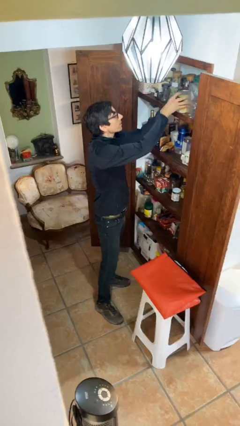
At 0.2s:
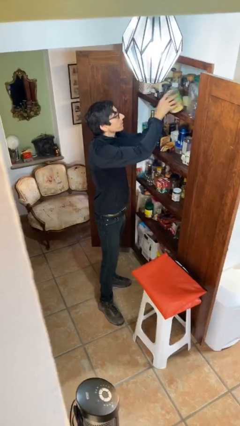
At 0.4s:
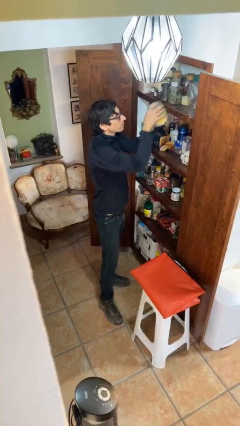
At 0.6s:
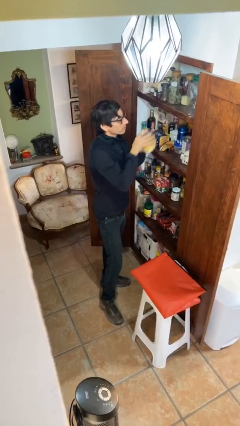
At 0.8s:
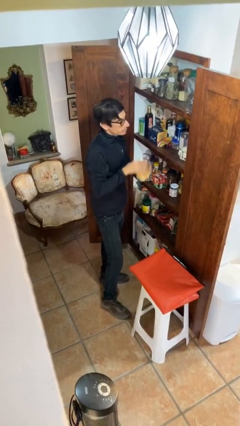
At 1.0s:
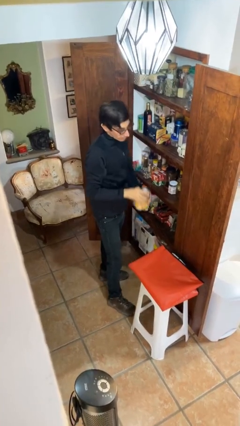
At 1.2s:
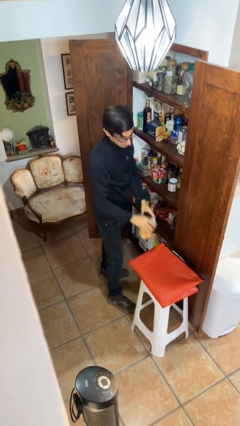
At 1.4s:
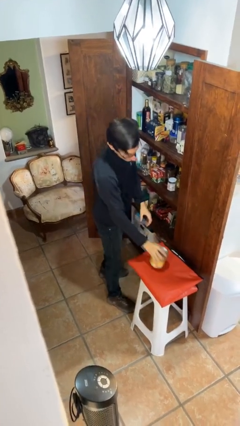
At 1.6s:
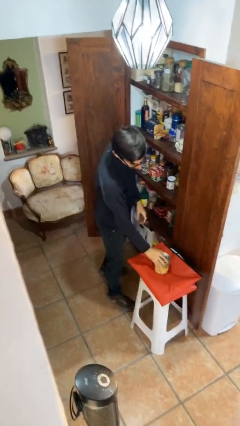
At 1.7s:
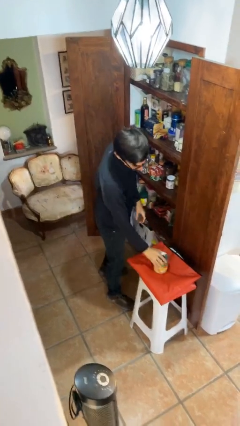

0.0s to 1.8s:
person picks up object from shelf

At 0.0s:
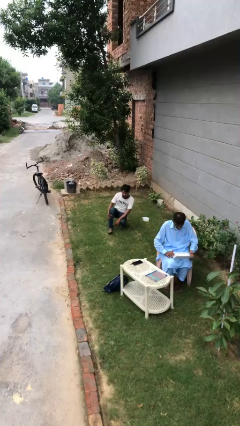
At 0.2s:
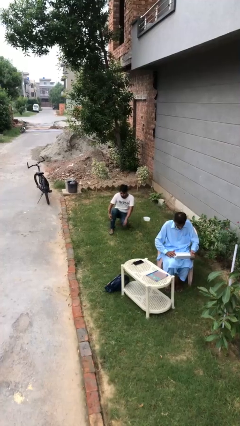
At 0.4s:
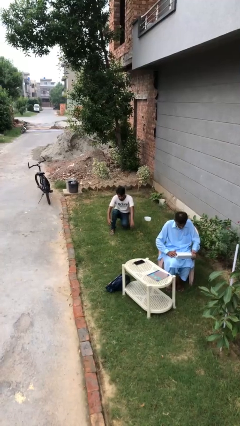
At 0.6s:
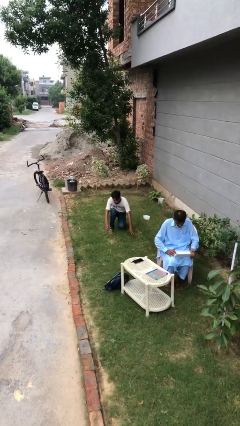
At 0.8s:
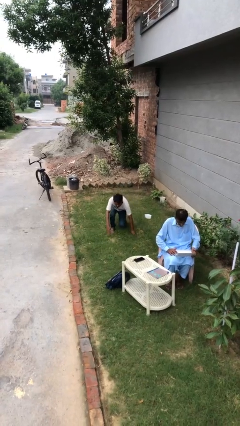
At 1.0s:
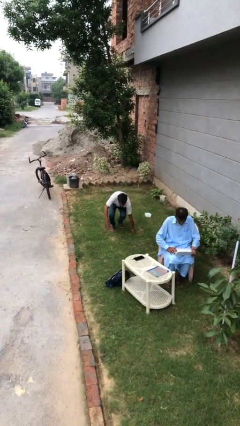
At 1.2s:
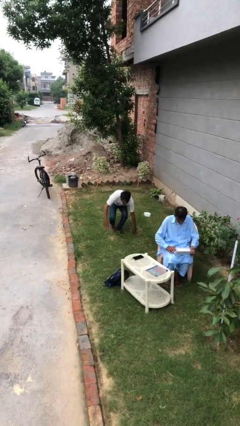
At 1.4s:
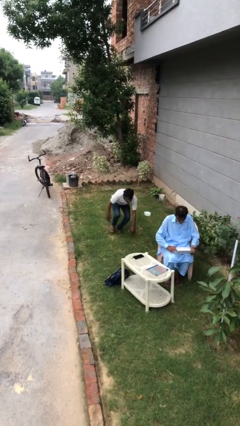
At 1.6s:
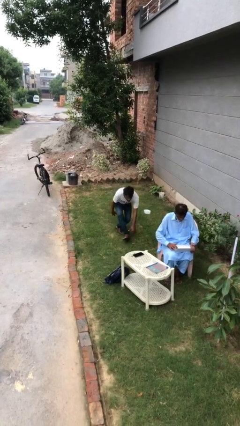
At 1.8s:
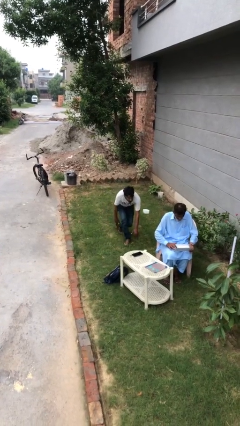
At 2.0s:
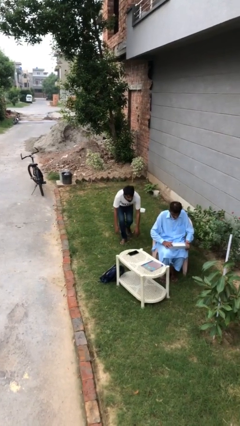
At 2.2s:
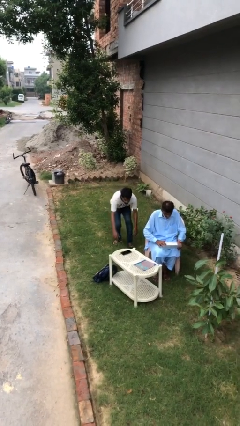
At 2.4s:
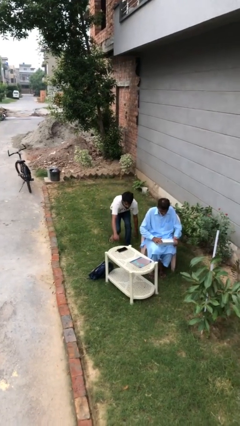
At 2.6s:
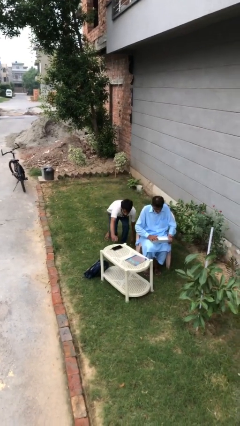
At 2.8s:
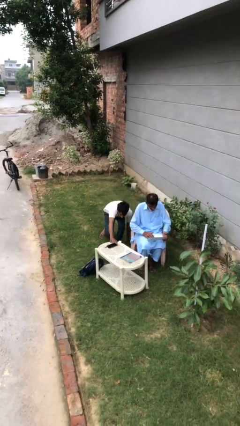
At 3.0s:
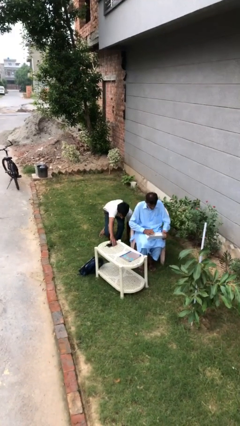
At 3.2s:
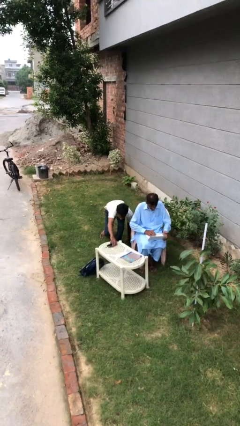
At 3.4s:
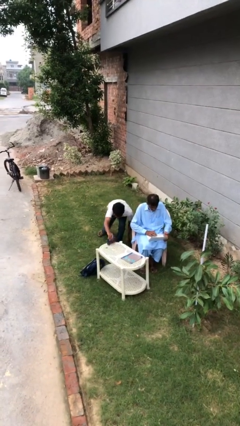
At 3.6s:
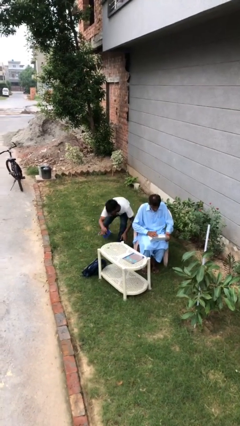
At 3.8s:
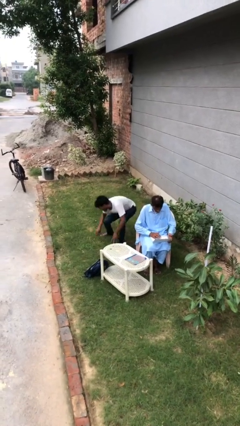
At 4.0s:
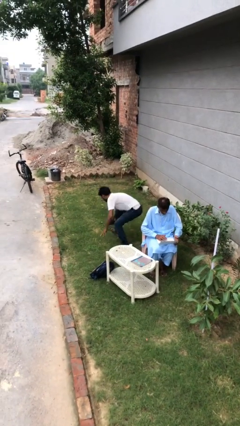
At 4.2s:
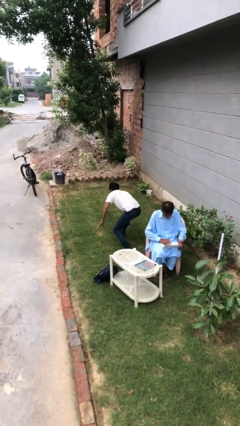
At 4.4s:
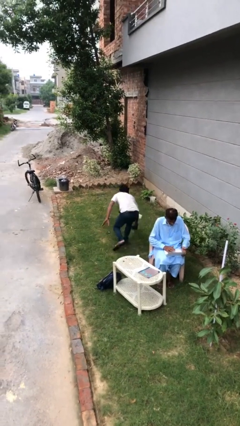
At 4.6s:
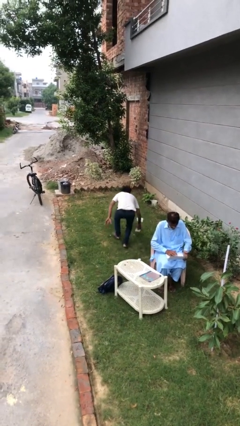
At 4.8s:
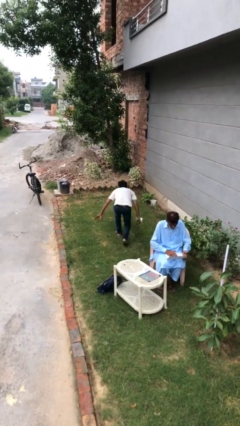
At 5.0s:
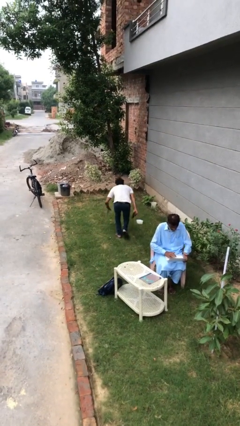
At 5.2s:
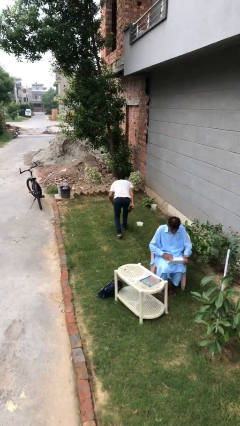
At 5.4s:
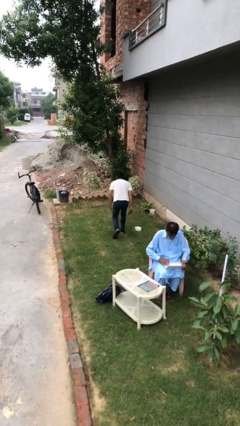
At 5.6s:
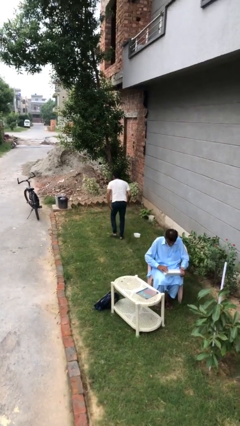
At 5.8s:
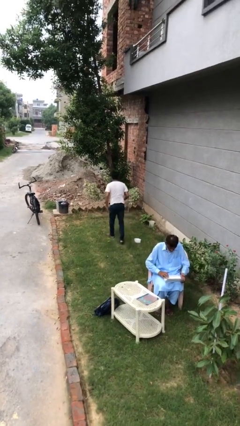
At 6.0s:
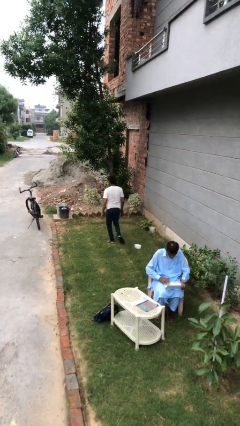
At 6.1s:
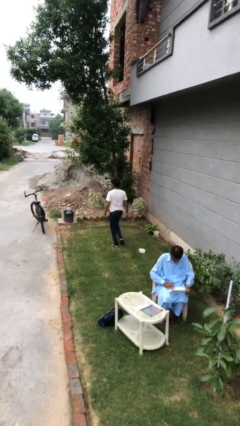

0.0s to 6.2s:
person steals object from person

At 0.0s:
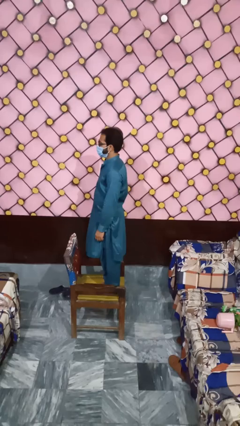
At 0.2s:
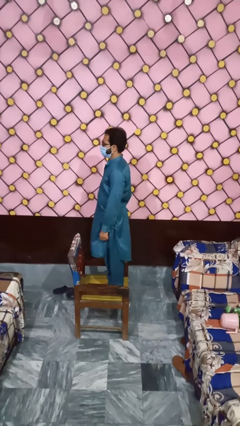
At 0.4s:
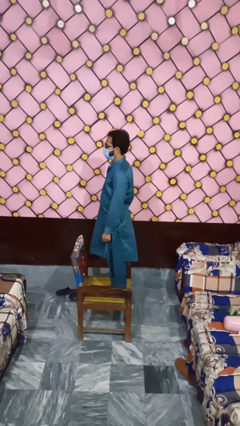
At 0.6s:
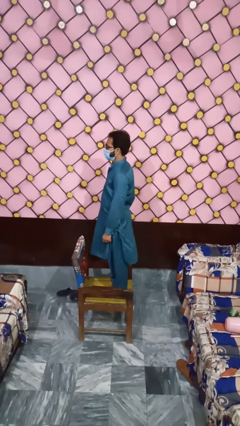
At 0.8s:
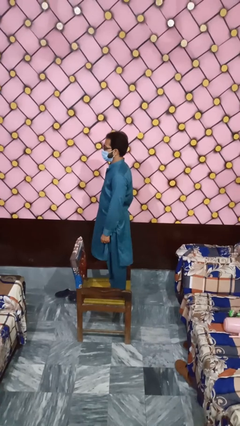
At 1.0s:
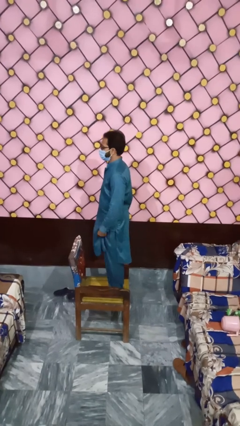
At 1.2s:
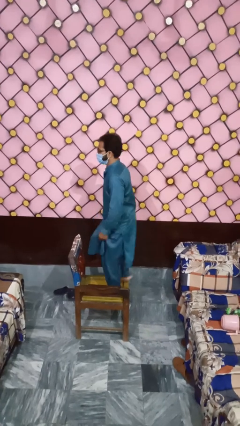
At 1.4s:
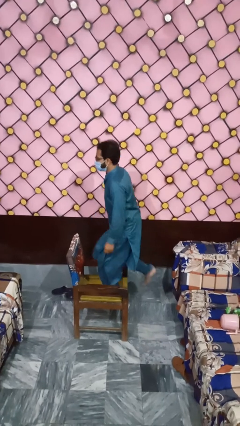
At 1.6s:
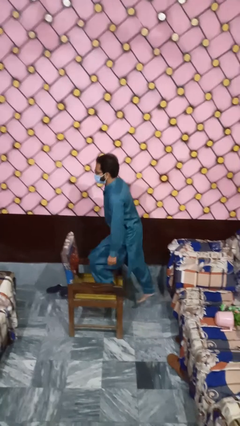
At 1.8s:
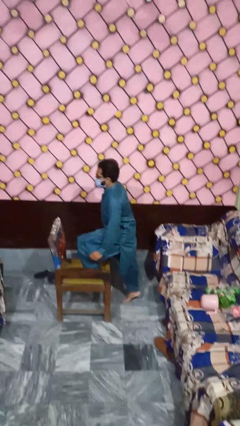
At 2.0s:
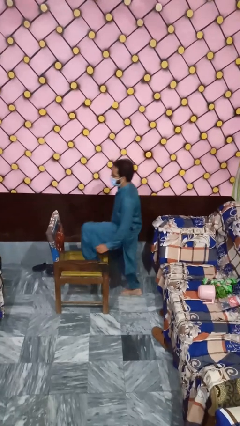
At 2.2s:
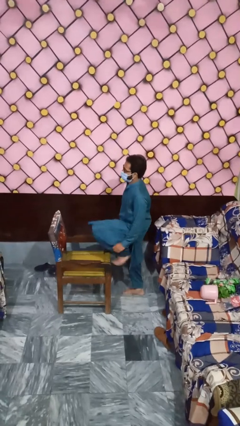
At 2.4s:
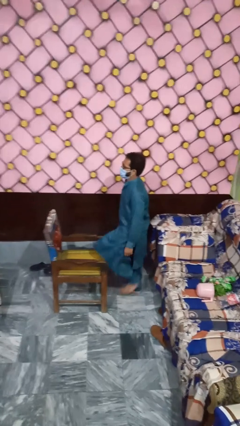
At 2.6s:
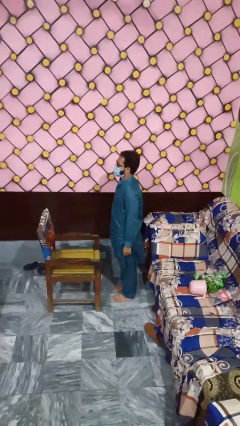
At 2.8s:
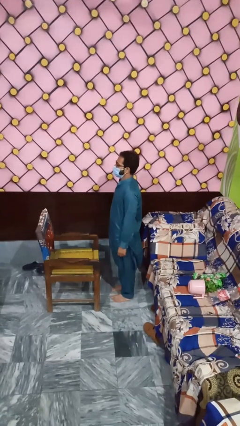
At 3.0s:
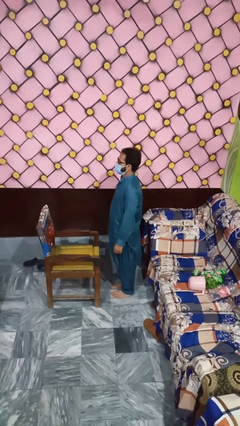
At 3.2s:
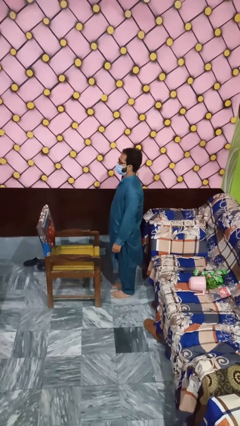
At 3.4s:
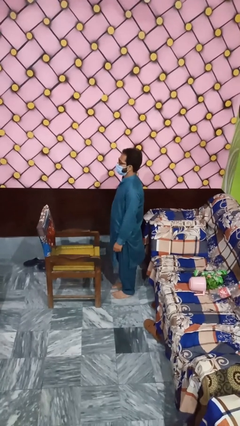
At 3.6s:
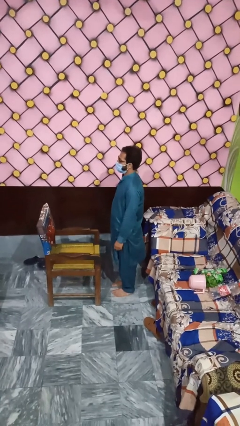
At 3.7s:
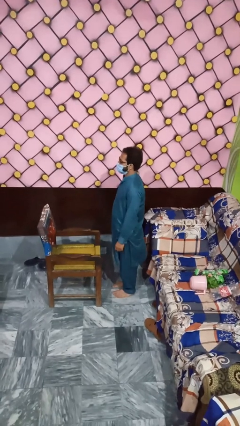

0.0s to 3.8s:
person climbs off chair

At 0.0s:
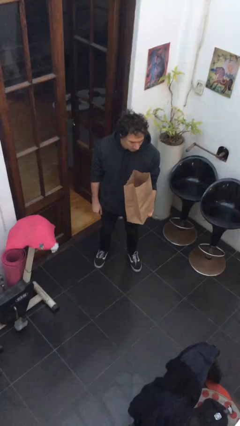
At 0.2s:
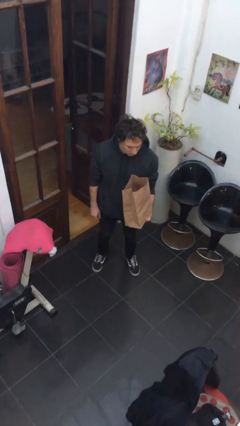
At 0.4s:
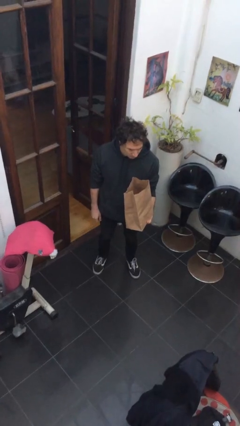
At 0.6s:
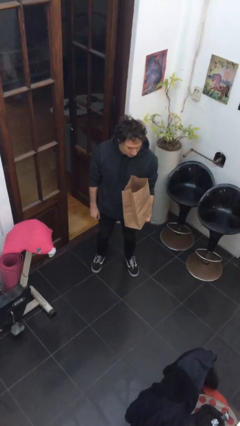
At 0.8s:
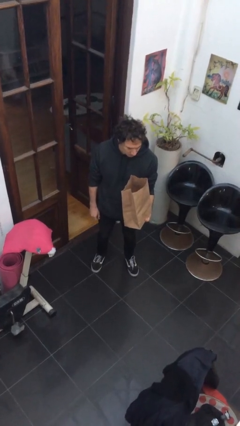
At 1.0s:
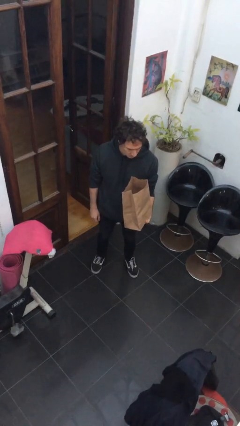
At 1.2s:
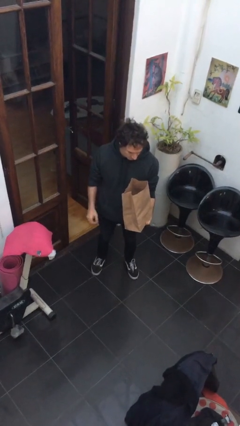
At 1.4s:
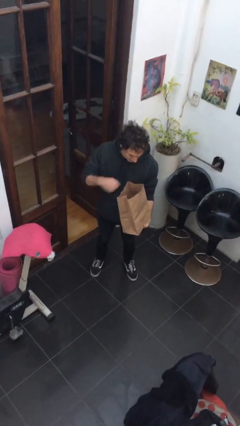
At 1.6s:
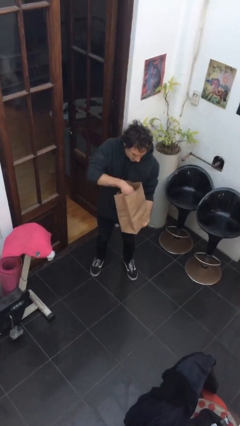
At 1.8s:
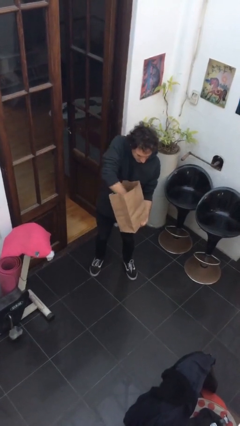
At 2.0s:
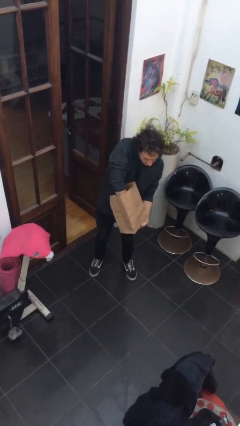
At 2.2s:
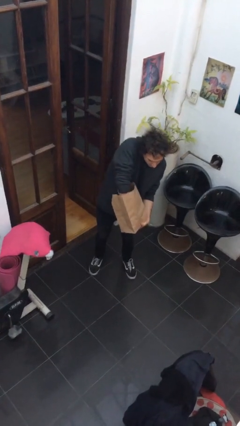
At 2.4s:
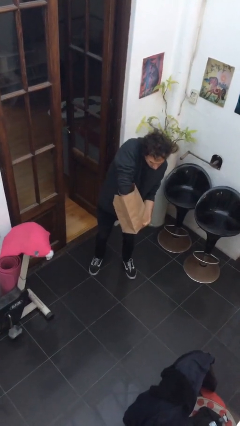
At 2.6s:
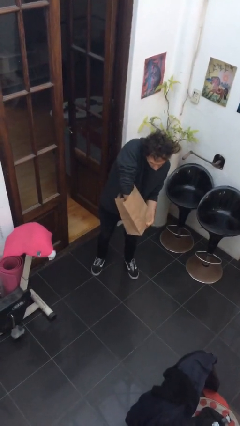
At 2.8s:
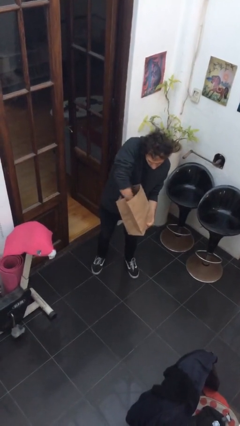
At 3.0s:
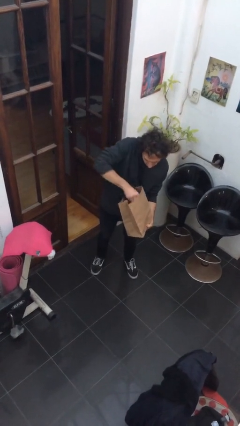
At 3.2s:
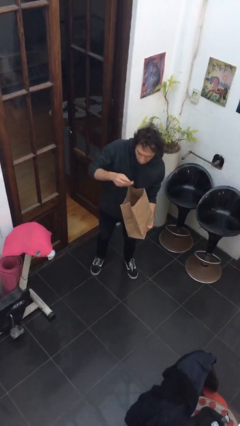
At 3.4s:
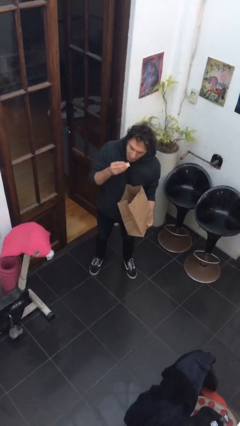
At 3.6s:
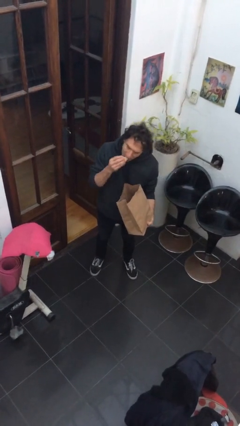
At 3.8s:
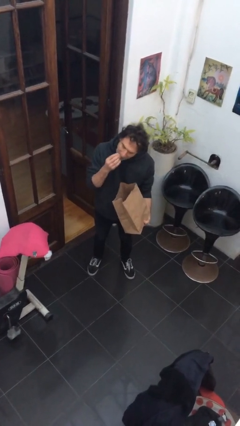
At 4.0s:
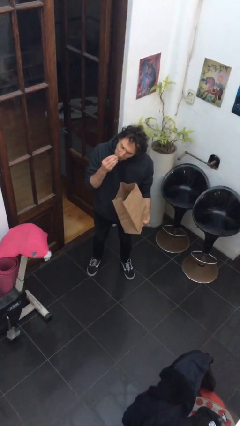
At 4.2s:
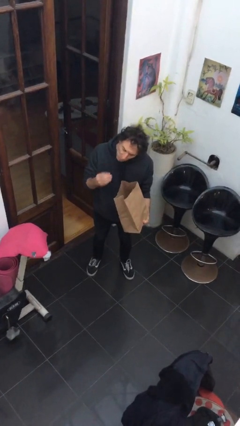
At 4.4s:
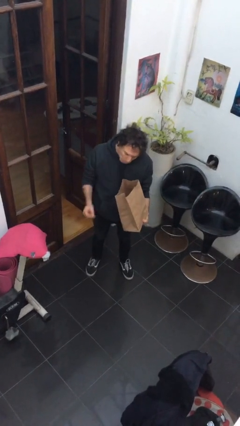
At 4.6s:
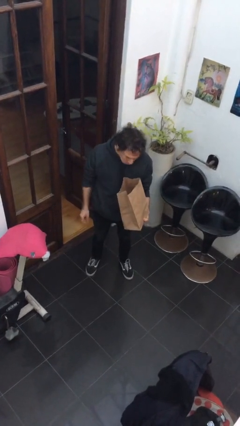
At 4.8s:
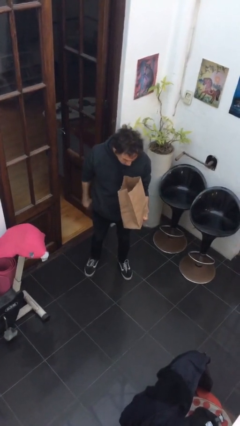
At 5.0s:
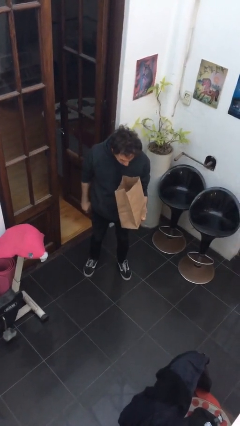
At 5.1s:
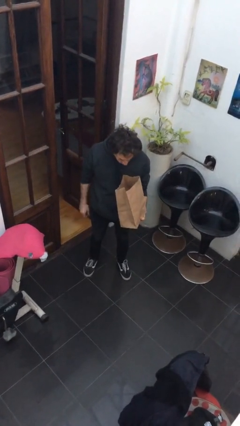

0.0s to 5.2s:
person eats snack from bag

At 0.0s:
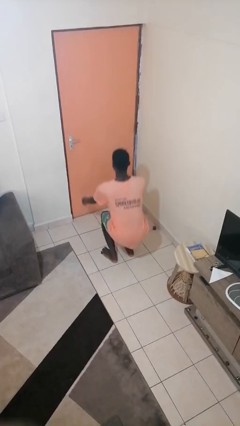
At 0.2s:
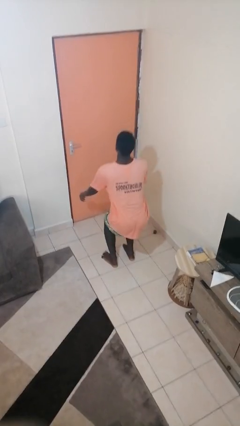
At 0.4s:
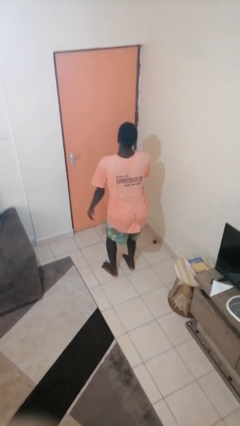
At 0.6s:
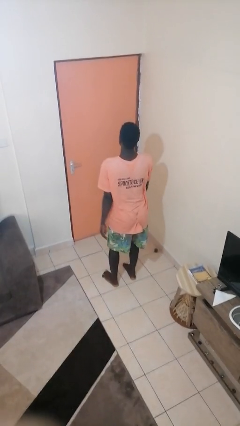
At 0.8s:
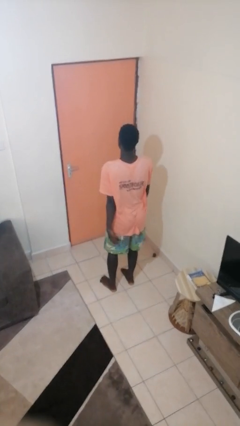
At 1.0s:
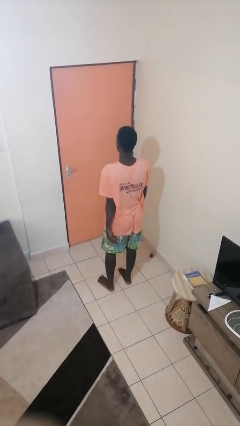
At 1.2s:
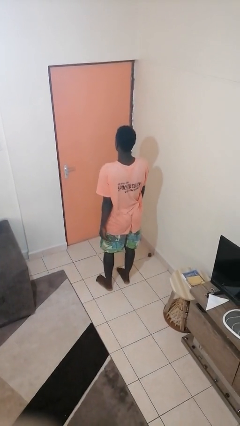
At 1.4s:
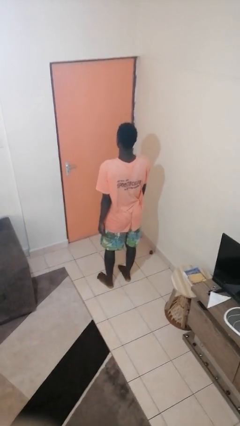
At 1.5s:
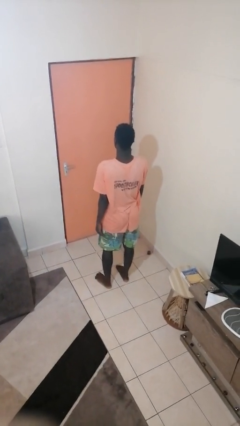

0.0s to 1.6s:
person stands up
